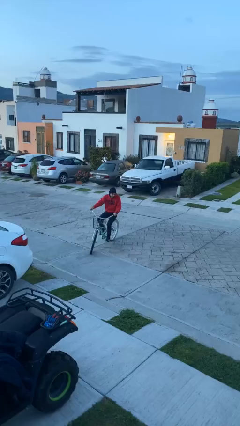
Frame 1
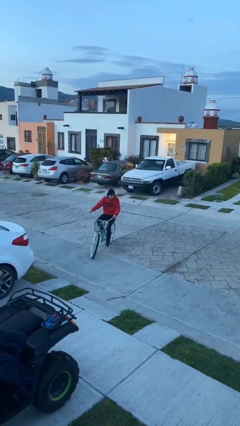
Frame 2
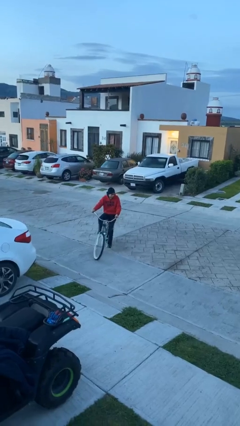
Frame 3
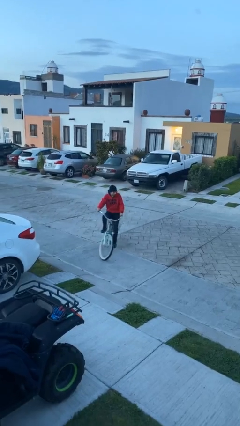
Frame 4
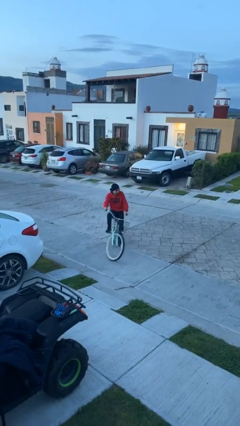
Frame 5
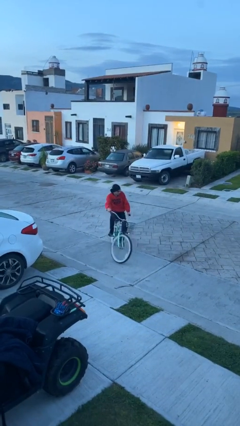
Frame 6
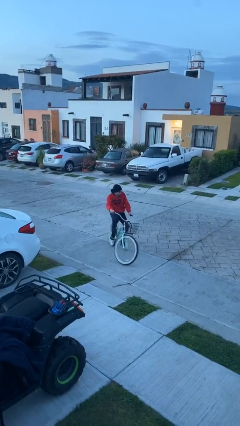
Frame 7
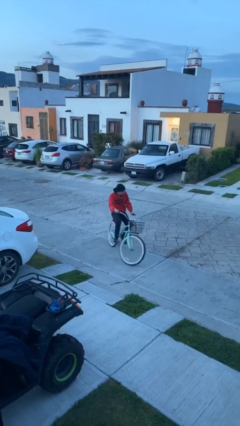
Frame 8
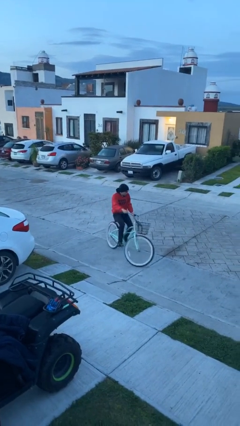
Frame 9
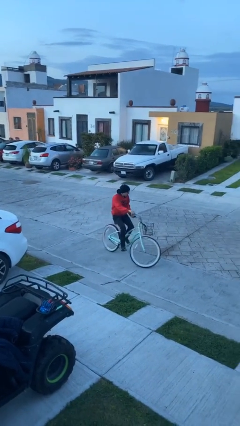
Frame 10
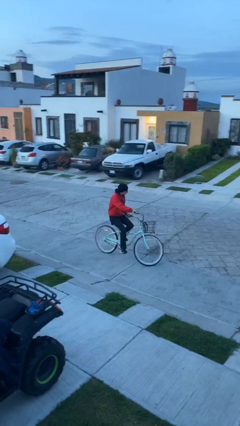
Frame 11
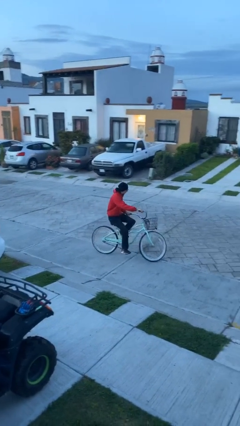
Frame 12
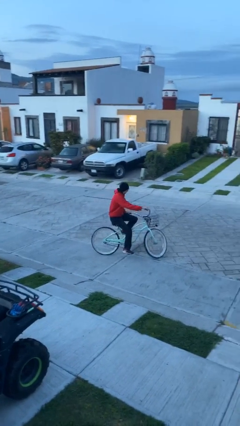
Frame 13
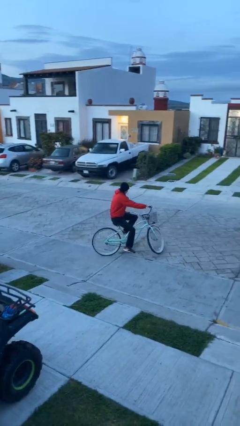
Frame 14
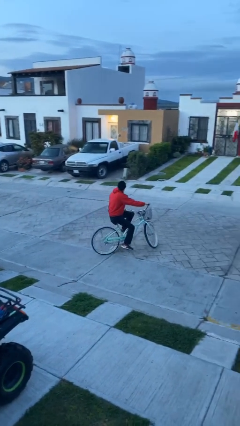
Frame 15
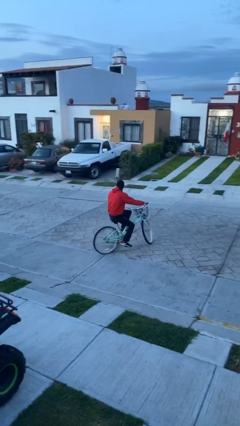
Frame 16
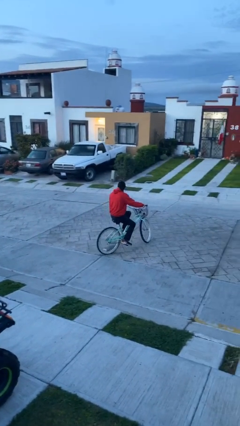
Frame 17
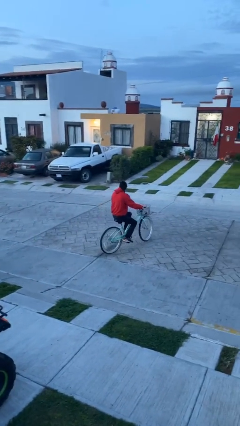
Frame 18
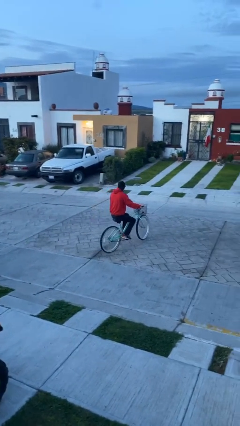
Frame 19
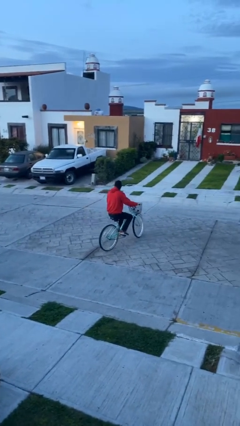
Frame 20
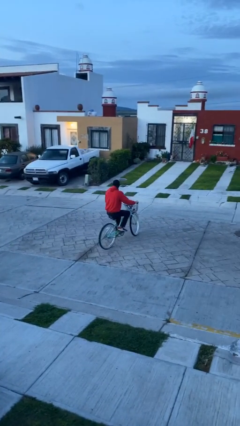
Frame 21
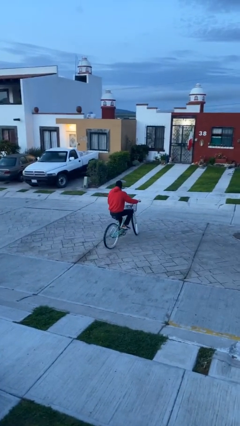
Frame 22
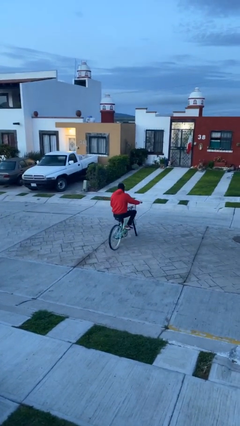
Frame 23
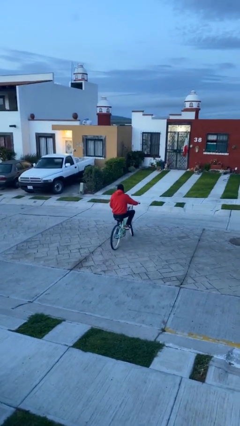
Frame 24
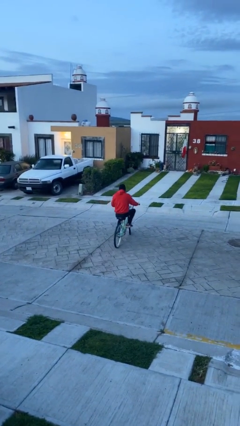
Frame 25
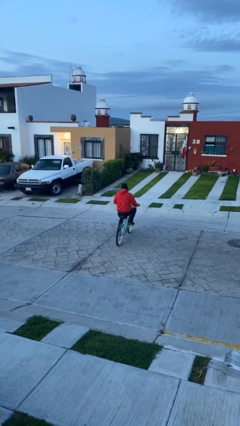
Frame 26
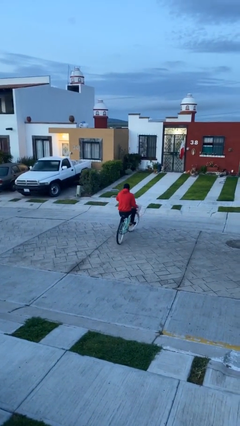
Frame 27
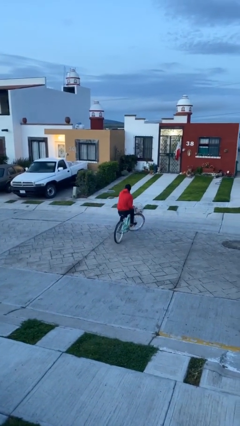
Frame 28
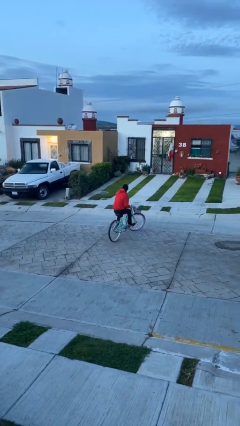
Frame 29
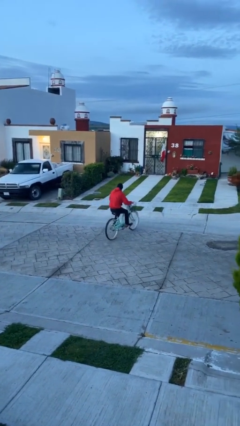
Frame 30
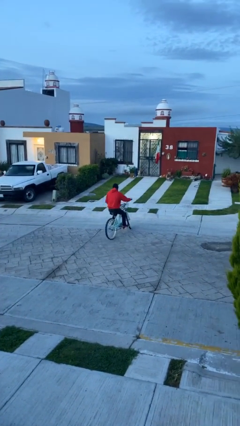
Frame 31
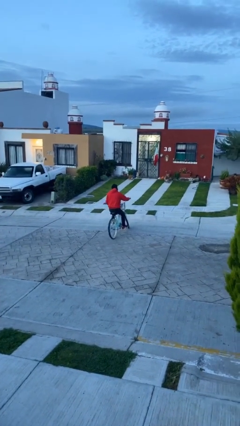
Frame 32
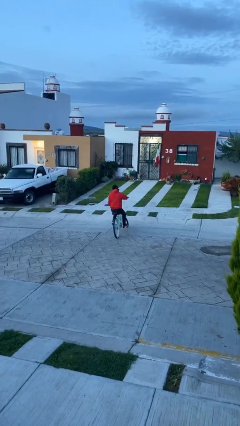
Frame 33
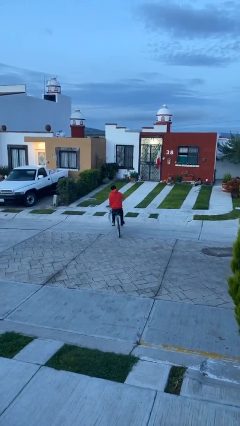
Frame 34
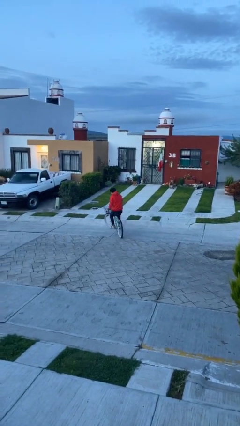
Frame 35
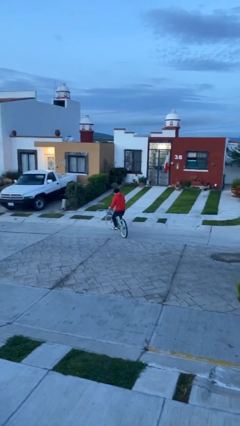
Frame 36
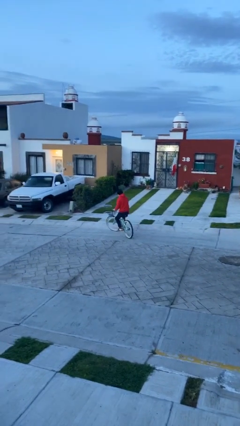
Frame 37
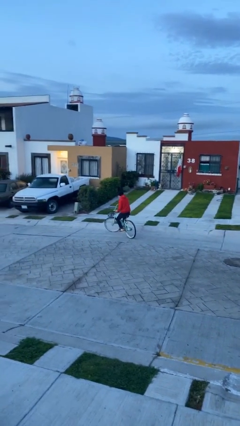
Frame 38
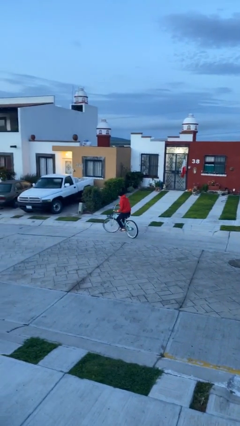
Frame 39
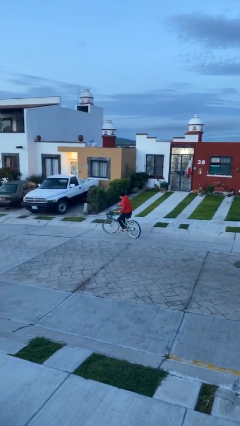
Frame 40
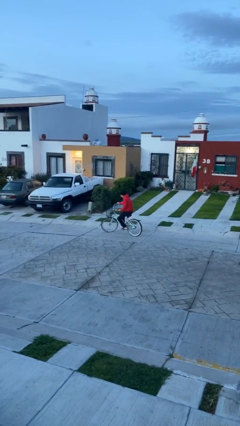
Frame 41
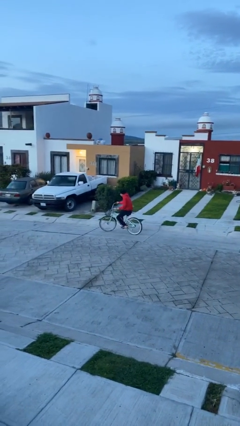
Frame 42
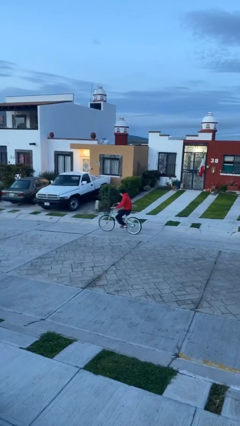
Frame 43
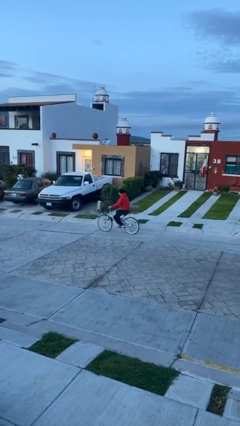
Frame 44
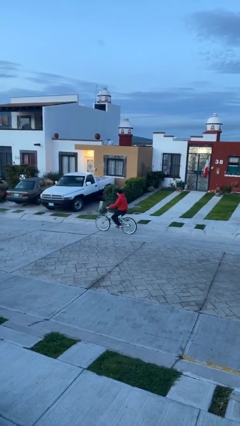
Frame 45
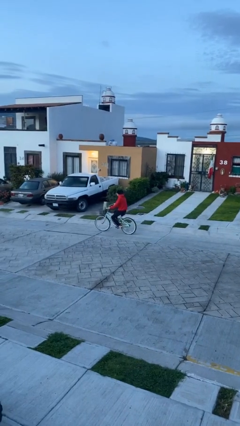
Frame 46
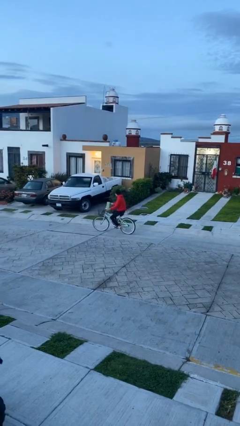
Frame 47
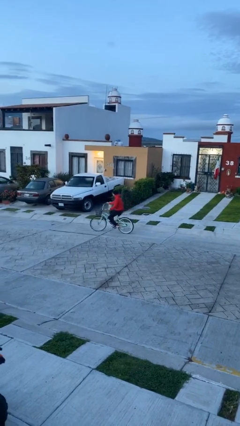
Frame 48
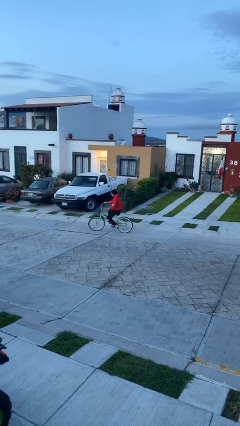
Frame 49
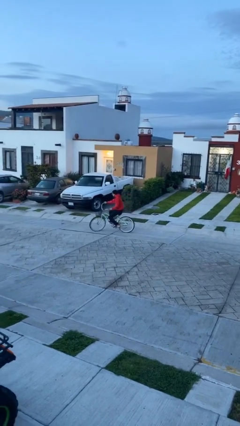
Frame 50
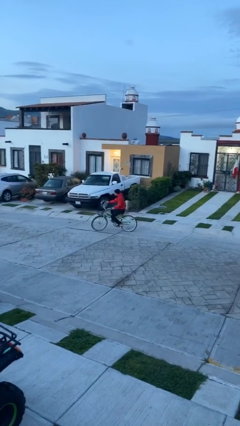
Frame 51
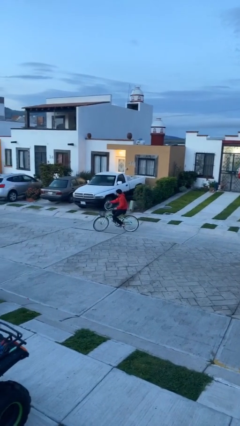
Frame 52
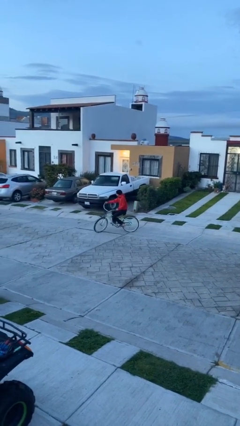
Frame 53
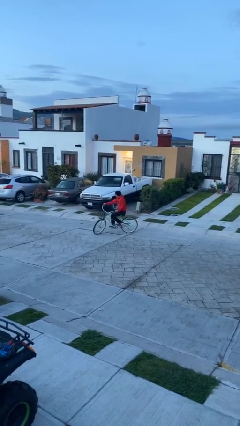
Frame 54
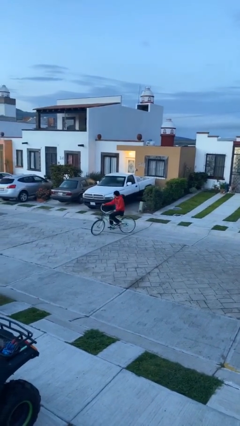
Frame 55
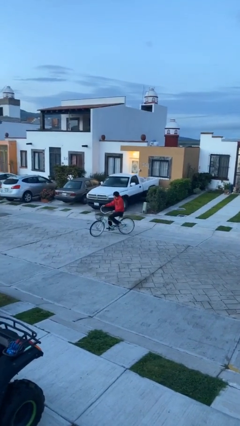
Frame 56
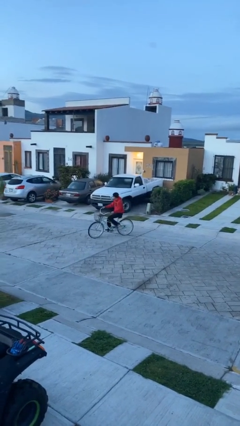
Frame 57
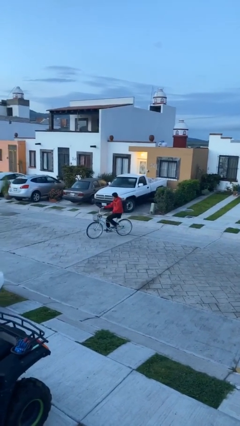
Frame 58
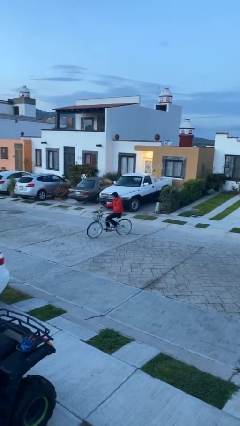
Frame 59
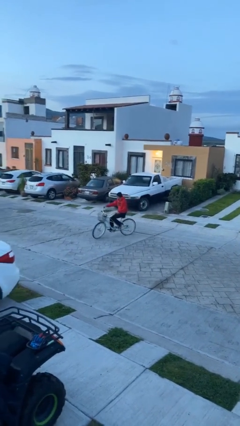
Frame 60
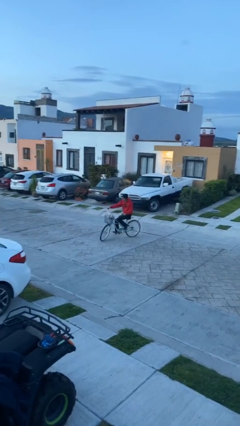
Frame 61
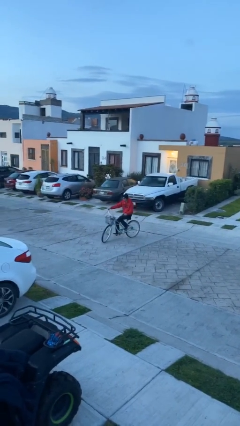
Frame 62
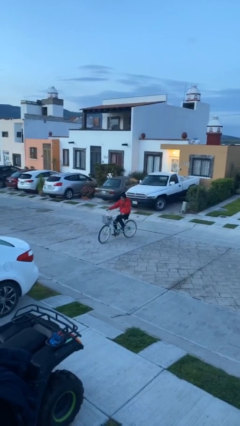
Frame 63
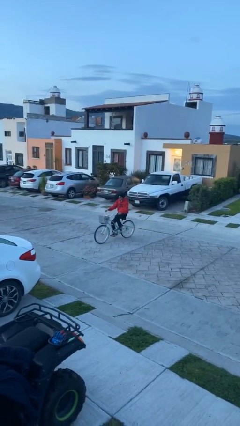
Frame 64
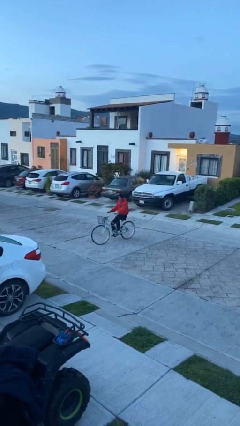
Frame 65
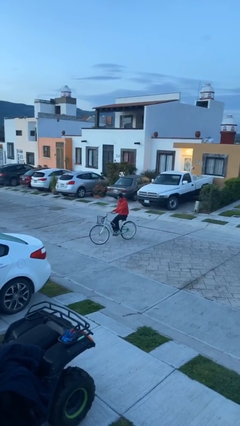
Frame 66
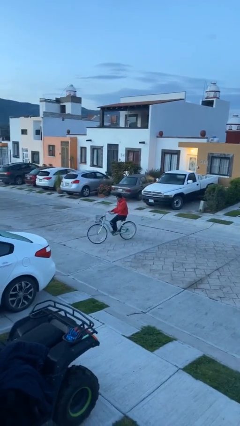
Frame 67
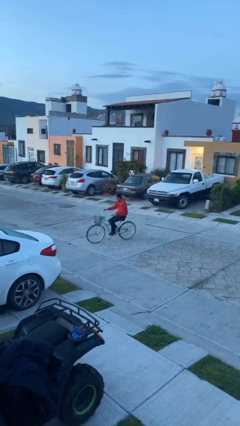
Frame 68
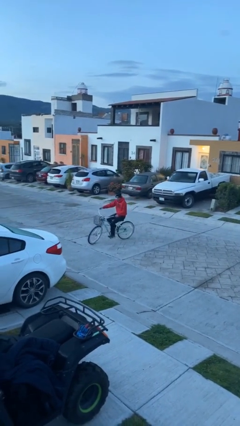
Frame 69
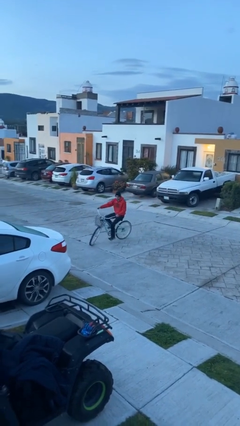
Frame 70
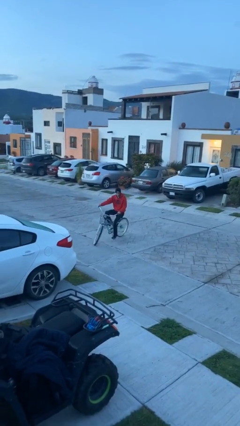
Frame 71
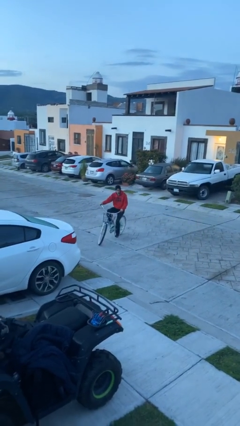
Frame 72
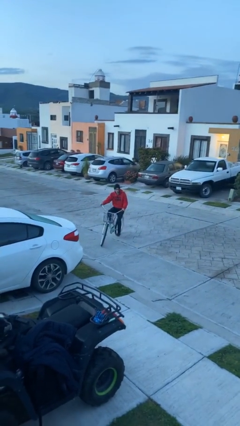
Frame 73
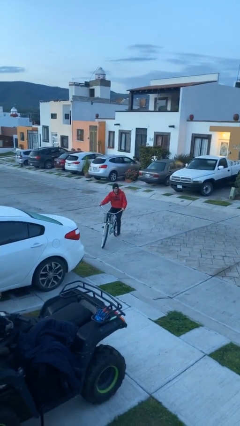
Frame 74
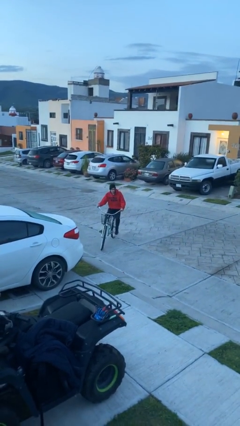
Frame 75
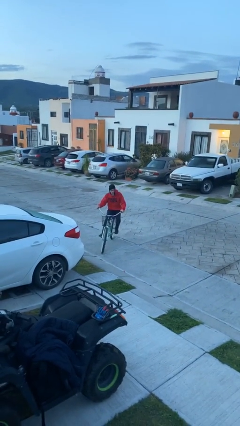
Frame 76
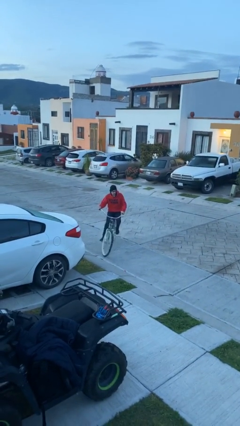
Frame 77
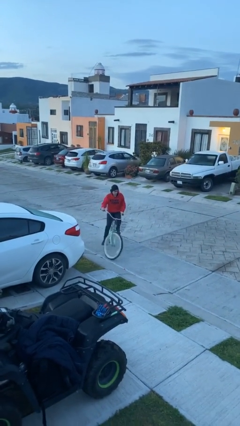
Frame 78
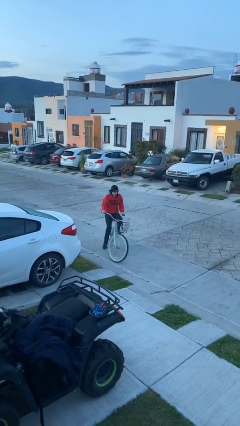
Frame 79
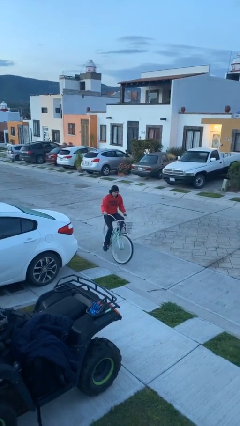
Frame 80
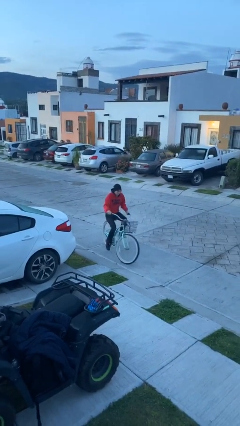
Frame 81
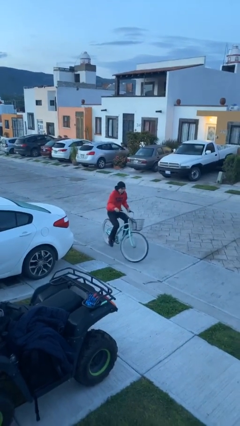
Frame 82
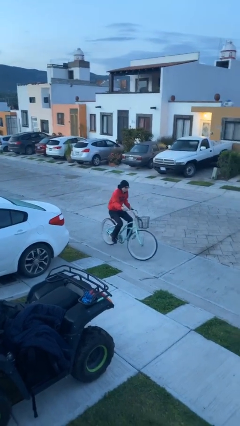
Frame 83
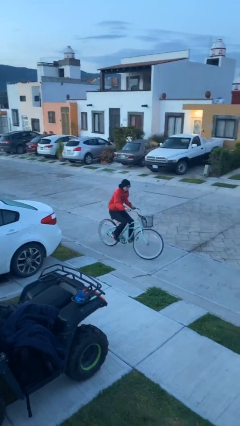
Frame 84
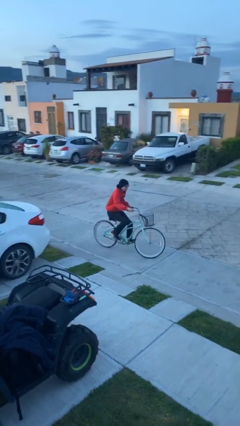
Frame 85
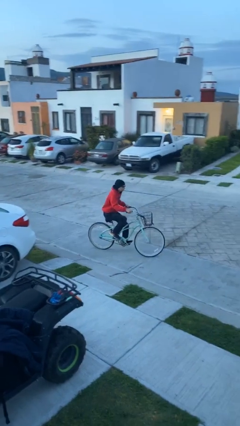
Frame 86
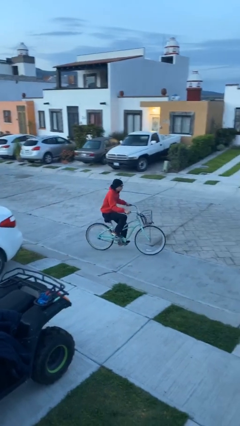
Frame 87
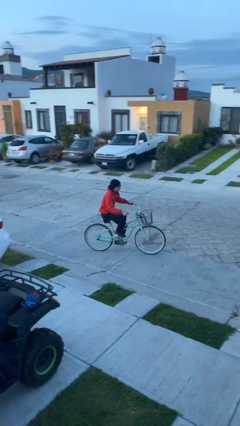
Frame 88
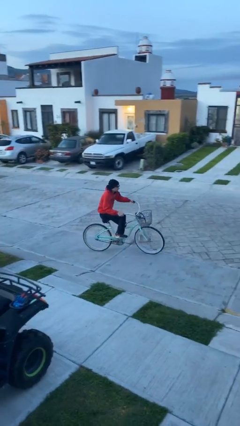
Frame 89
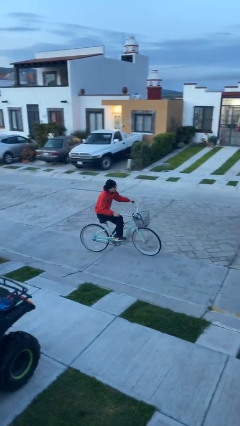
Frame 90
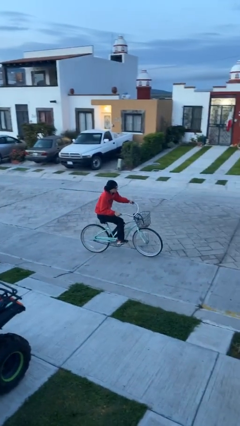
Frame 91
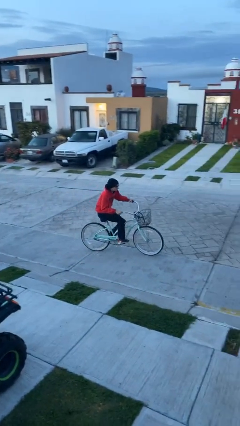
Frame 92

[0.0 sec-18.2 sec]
person rides bicycle

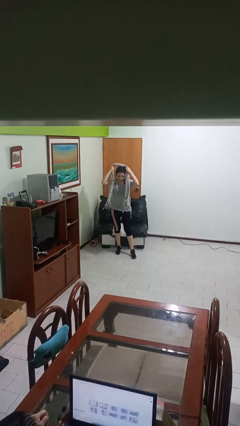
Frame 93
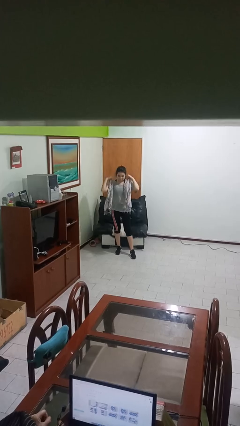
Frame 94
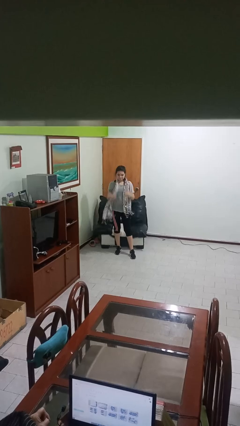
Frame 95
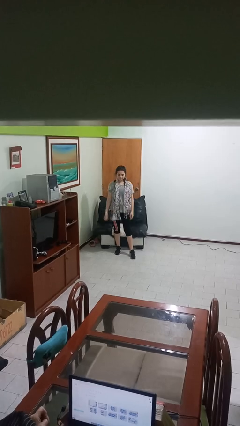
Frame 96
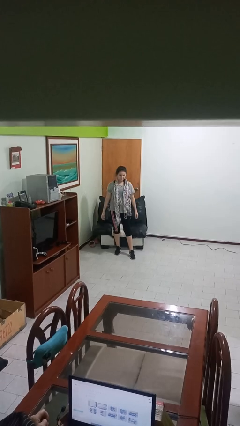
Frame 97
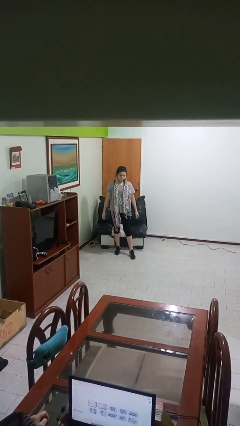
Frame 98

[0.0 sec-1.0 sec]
person puts on scarf
